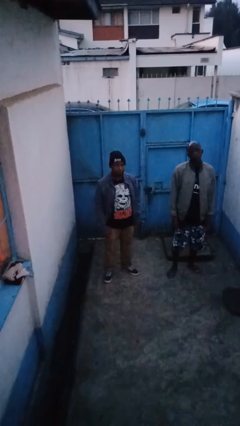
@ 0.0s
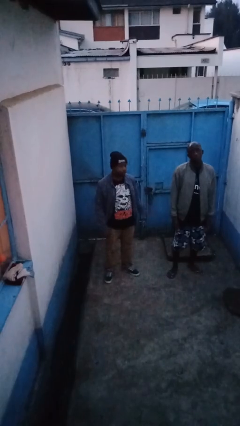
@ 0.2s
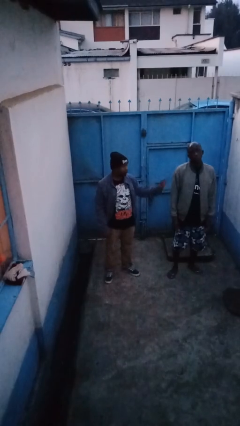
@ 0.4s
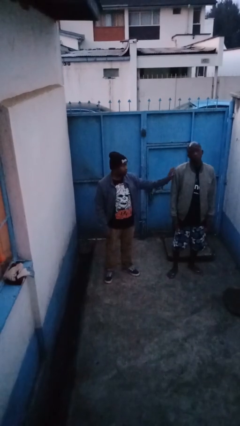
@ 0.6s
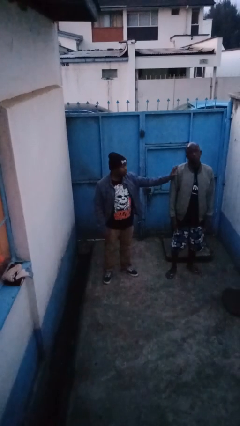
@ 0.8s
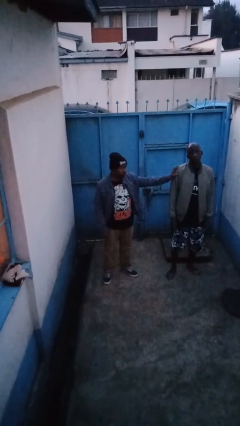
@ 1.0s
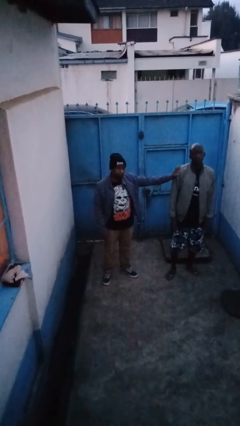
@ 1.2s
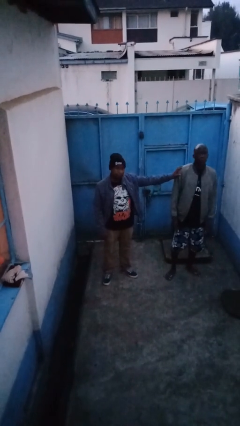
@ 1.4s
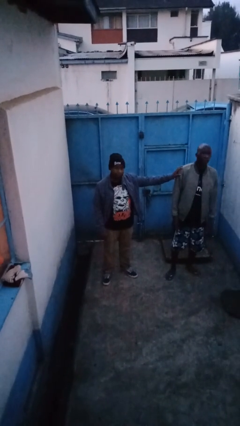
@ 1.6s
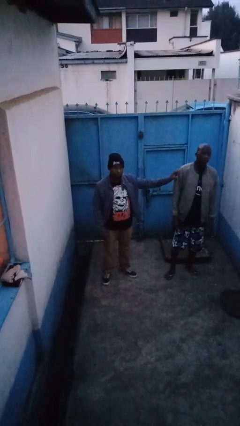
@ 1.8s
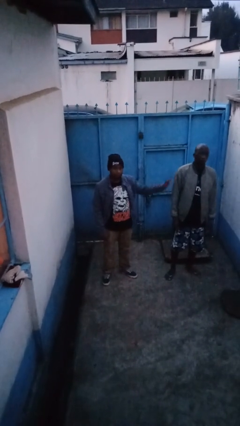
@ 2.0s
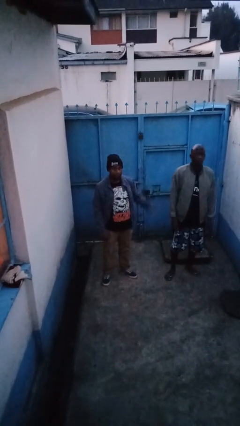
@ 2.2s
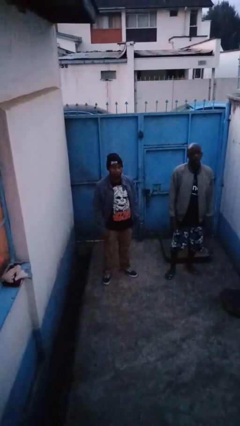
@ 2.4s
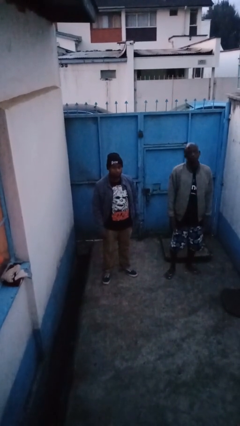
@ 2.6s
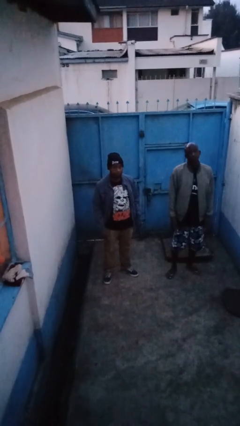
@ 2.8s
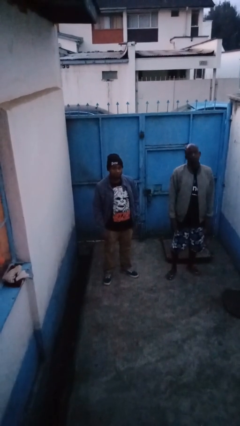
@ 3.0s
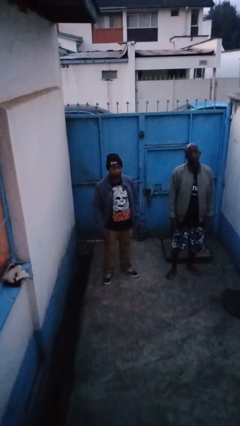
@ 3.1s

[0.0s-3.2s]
person shoves person

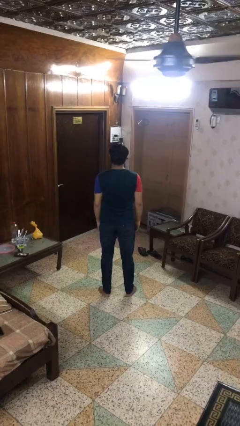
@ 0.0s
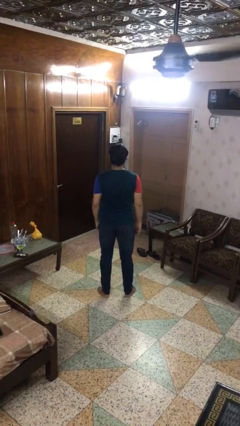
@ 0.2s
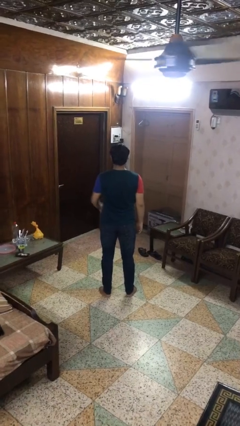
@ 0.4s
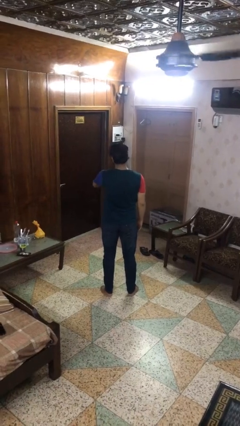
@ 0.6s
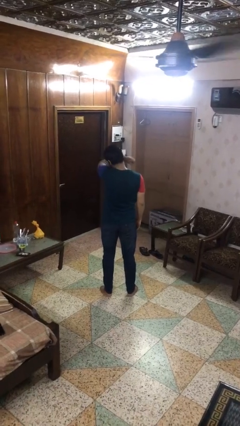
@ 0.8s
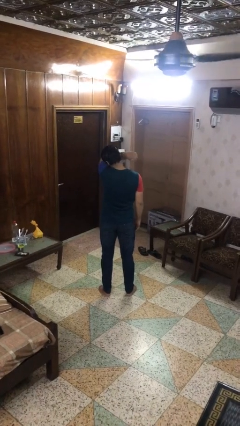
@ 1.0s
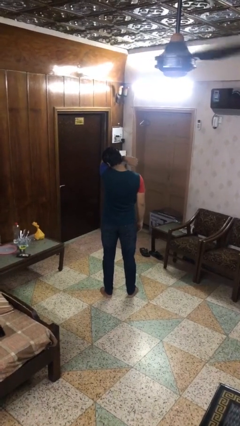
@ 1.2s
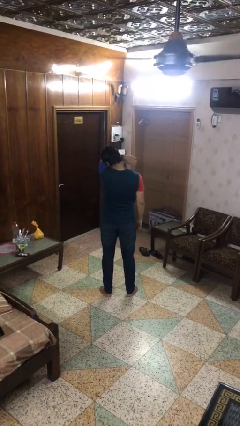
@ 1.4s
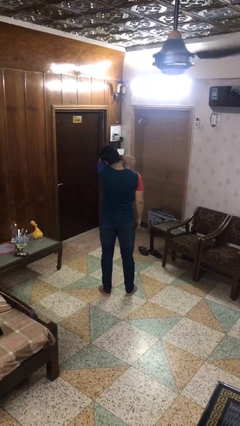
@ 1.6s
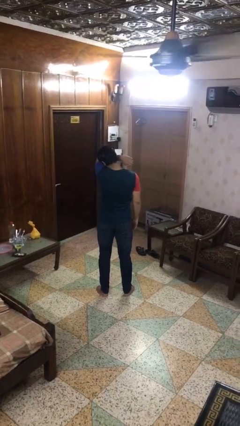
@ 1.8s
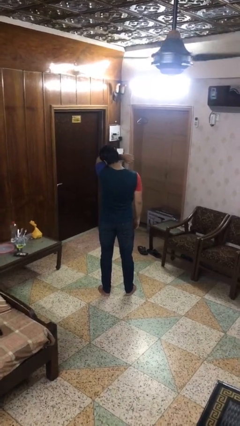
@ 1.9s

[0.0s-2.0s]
person sneezes into arm

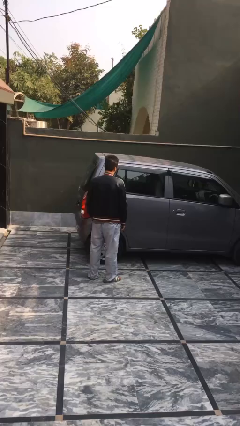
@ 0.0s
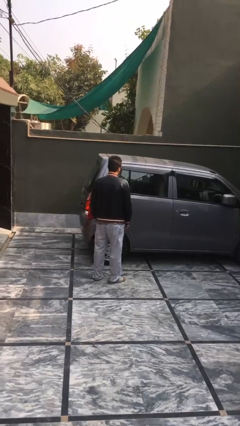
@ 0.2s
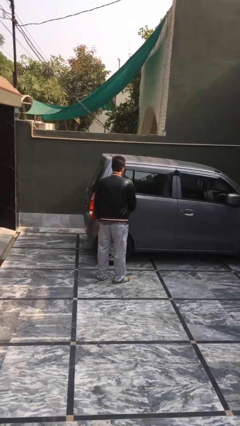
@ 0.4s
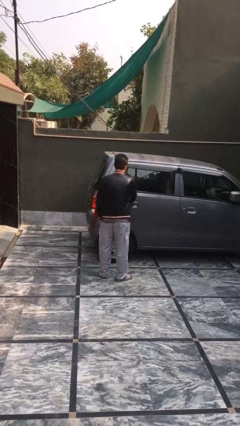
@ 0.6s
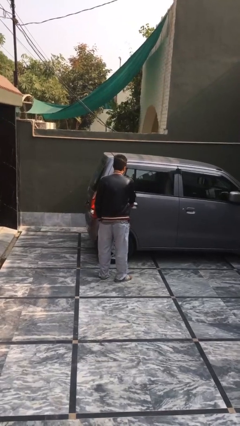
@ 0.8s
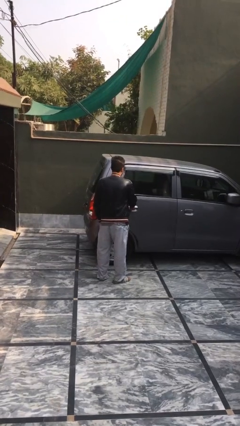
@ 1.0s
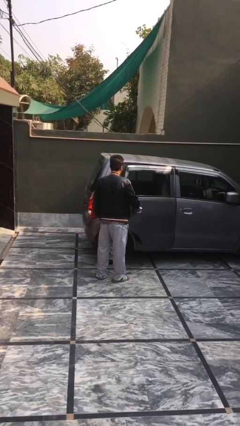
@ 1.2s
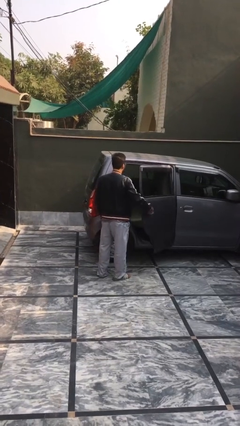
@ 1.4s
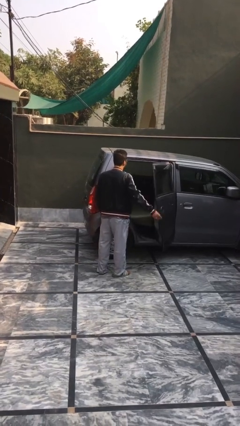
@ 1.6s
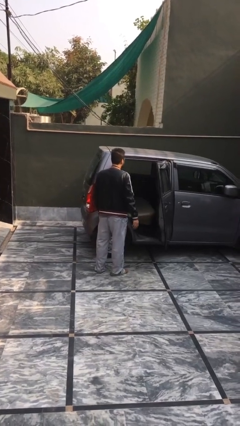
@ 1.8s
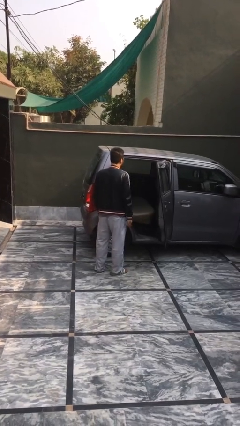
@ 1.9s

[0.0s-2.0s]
person opens car door

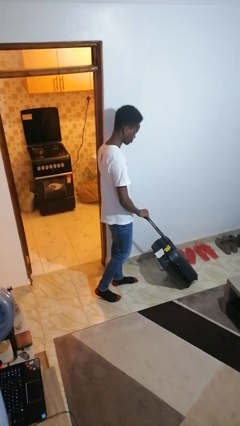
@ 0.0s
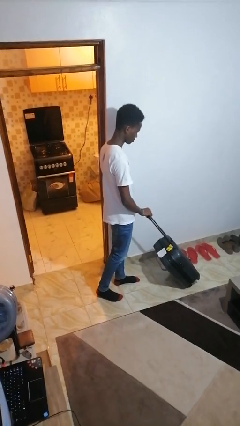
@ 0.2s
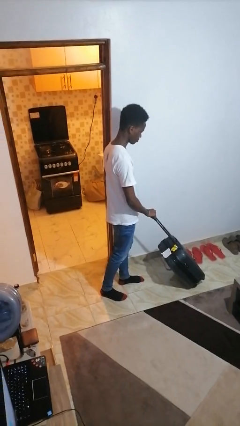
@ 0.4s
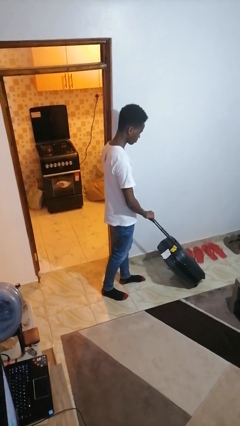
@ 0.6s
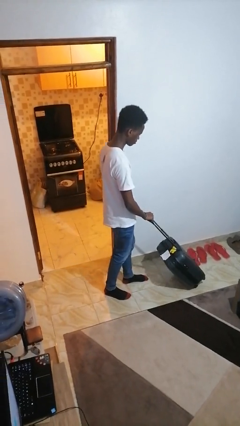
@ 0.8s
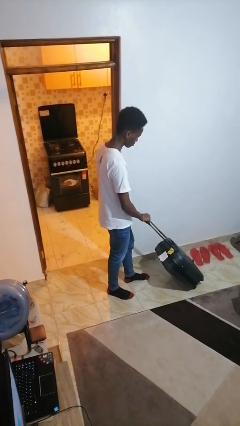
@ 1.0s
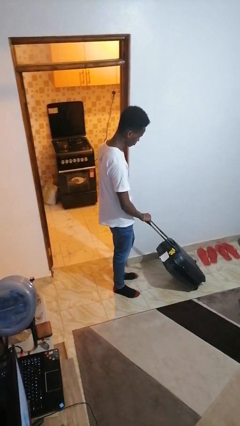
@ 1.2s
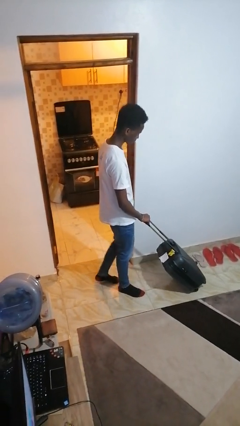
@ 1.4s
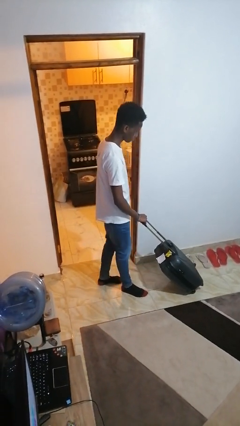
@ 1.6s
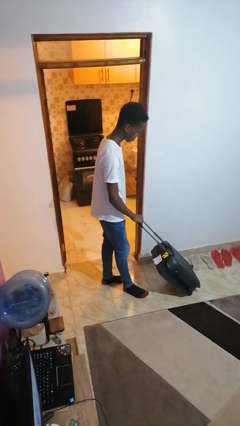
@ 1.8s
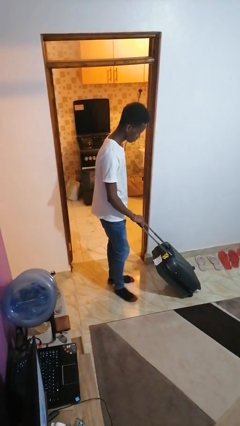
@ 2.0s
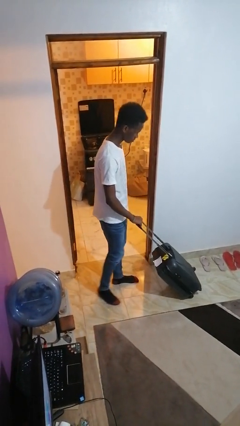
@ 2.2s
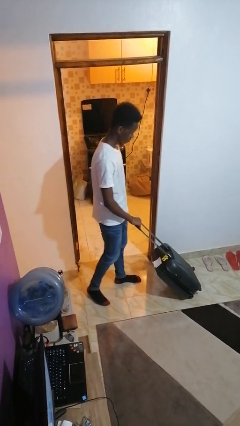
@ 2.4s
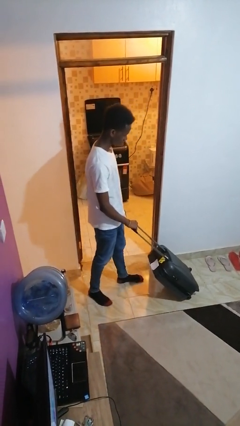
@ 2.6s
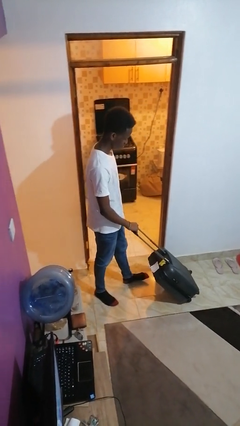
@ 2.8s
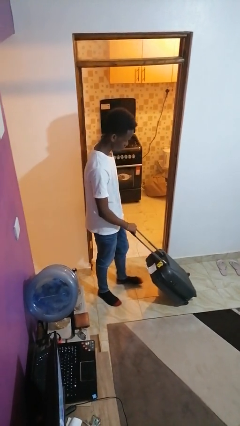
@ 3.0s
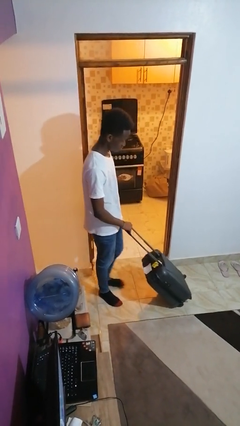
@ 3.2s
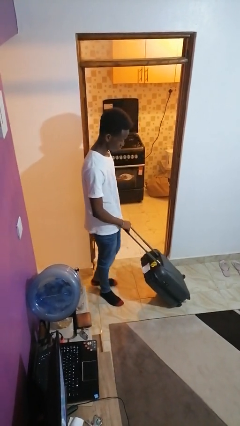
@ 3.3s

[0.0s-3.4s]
person pulls wheeled cart

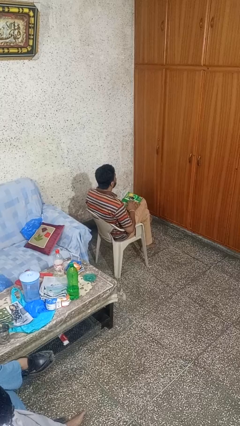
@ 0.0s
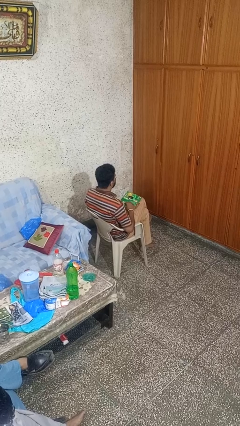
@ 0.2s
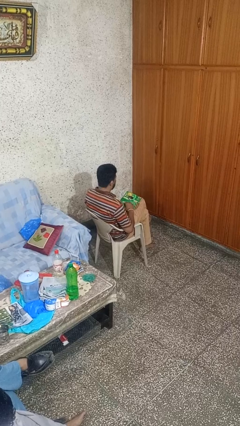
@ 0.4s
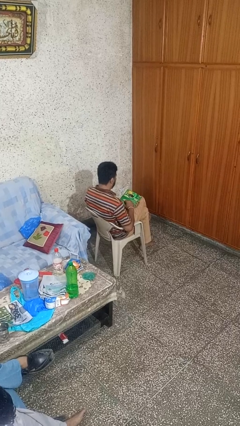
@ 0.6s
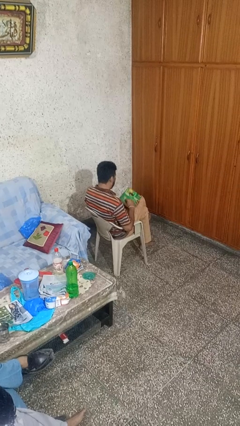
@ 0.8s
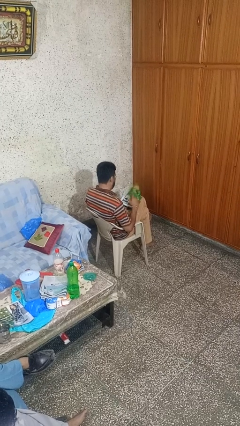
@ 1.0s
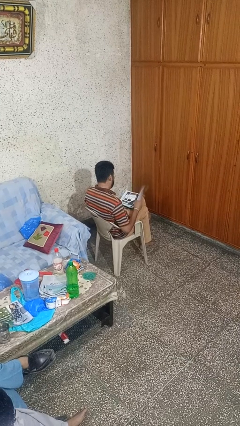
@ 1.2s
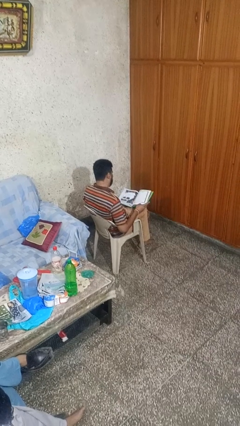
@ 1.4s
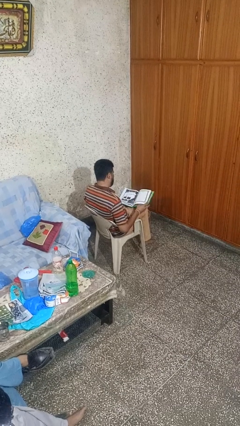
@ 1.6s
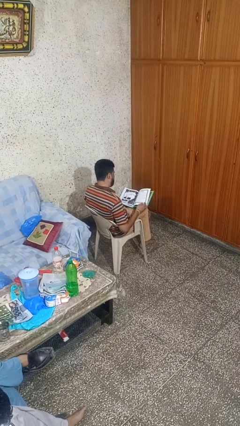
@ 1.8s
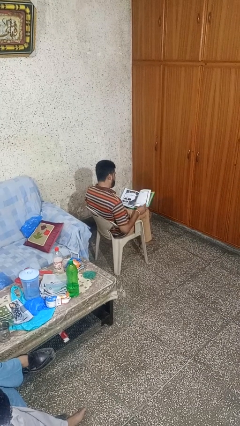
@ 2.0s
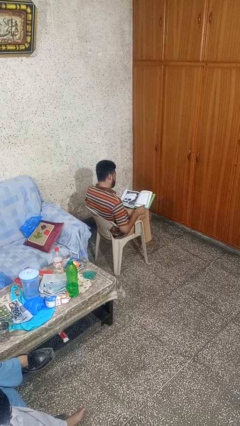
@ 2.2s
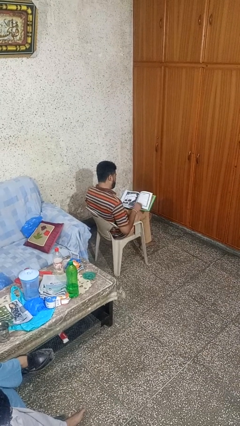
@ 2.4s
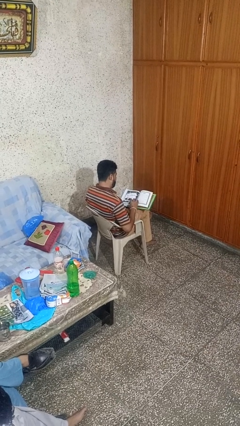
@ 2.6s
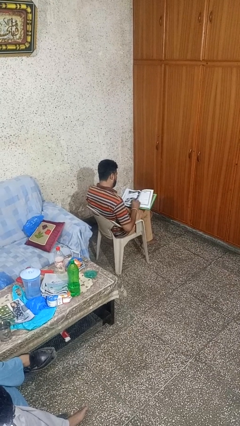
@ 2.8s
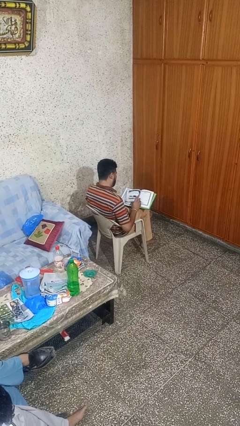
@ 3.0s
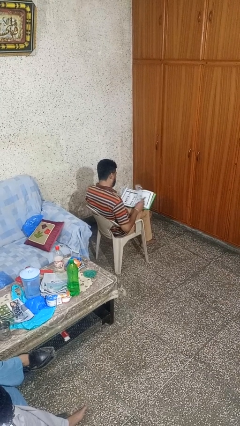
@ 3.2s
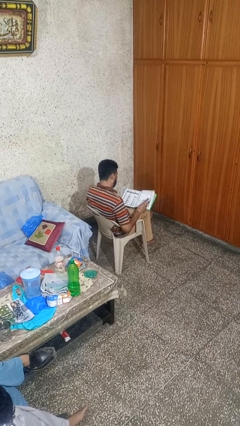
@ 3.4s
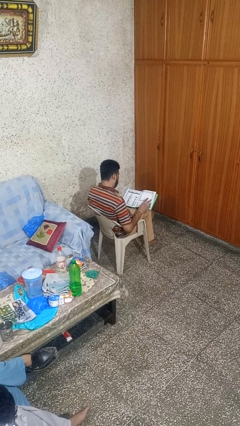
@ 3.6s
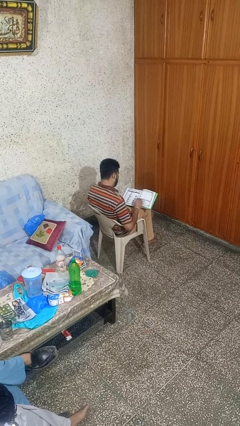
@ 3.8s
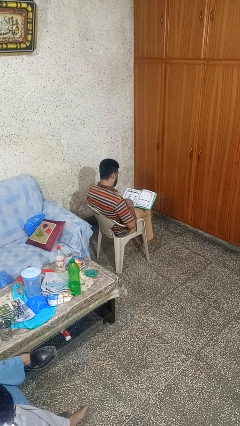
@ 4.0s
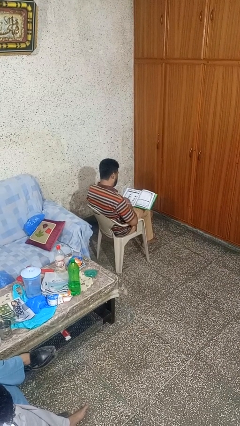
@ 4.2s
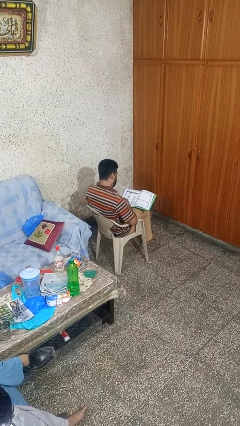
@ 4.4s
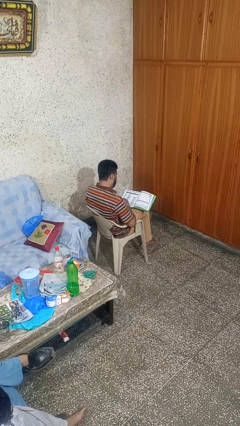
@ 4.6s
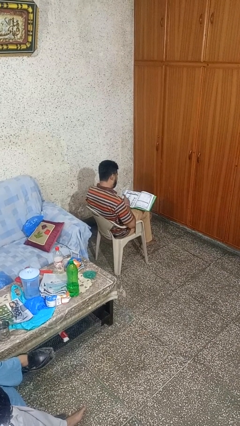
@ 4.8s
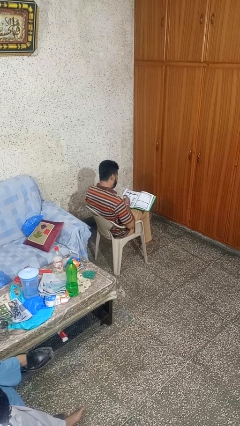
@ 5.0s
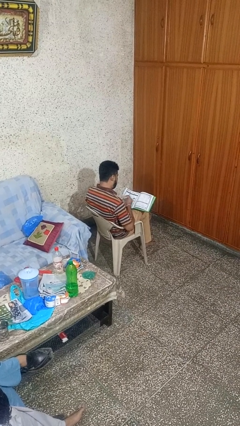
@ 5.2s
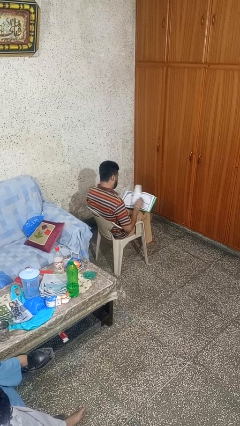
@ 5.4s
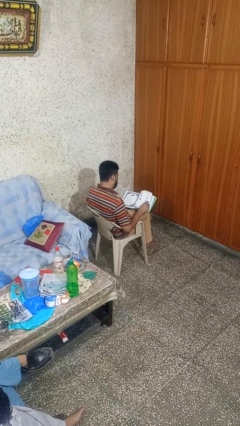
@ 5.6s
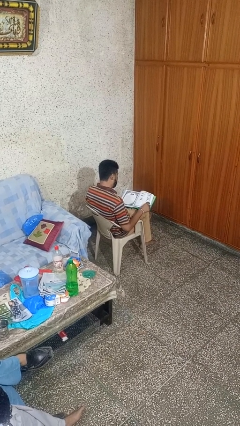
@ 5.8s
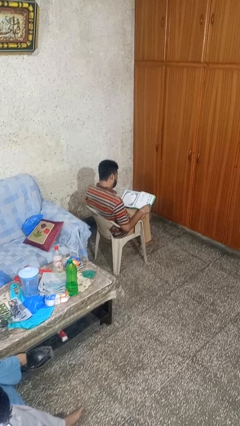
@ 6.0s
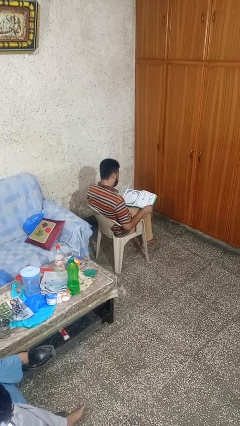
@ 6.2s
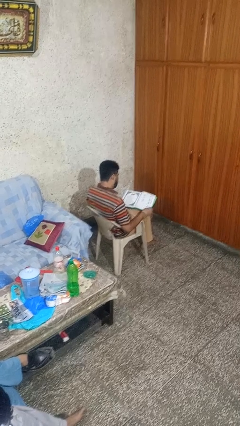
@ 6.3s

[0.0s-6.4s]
person reads book

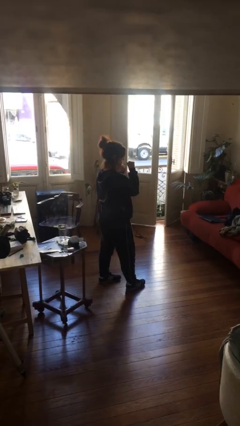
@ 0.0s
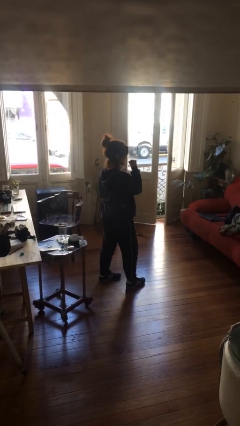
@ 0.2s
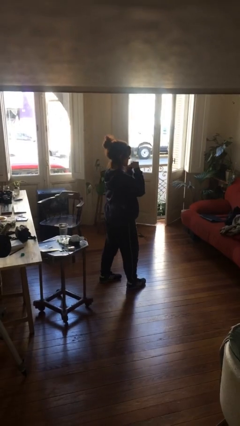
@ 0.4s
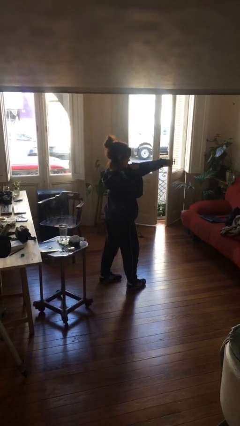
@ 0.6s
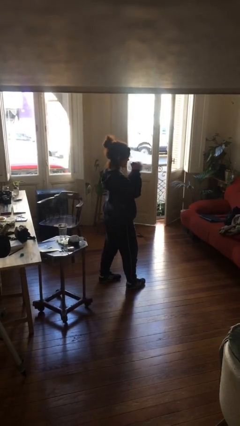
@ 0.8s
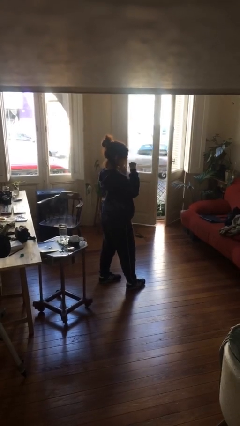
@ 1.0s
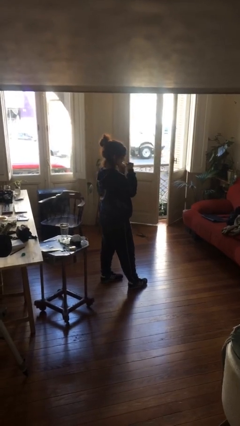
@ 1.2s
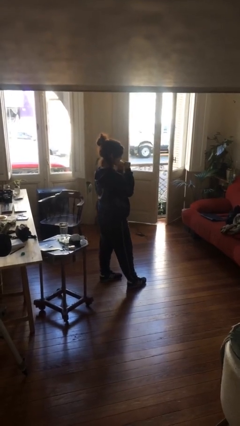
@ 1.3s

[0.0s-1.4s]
person punches
